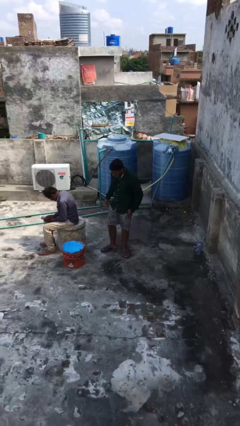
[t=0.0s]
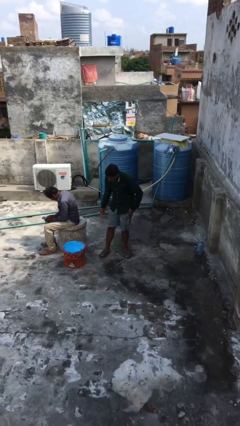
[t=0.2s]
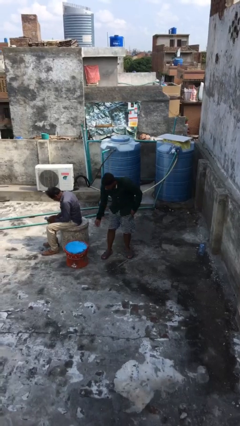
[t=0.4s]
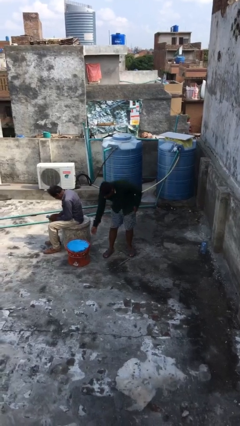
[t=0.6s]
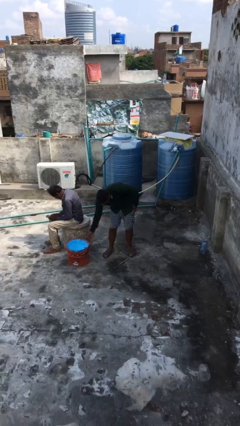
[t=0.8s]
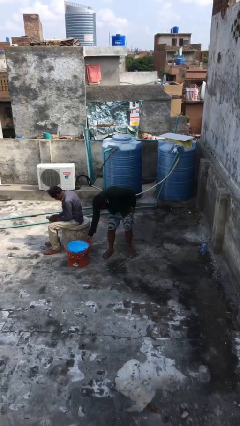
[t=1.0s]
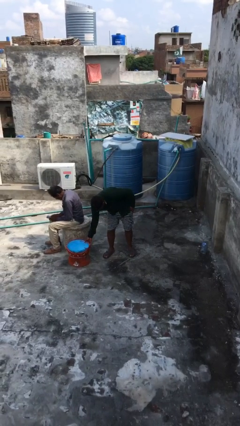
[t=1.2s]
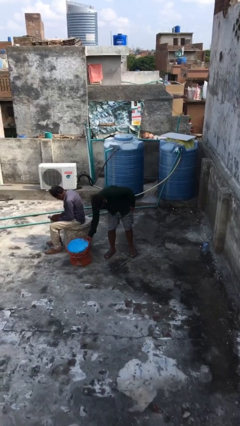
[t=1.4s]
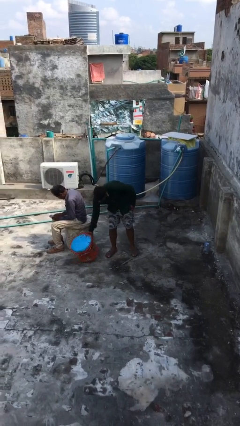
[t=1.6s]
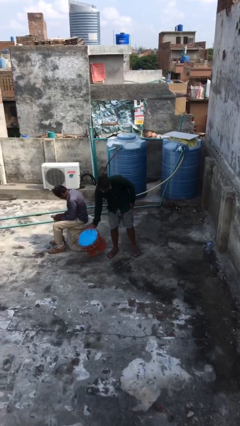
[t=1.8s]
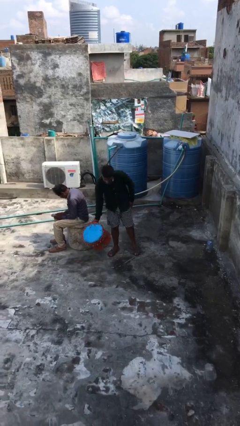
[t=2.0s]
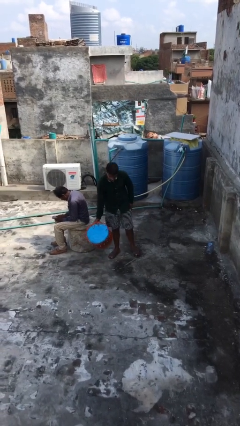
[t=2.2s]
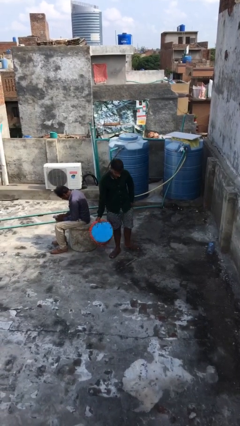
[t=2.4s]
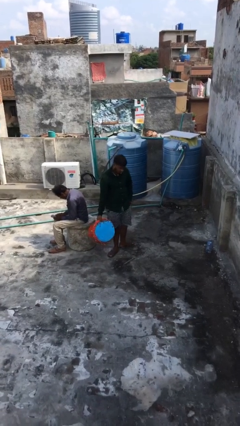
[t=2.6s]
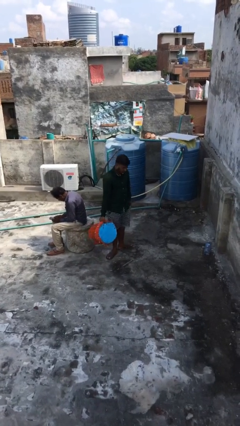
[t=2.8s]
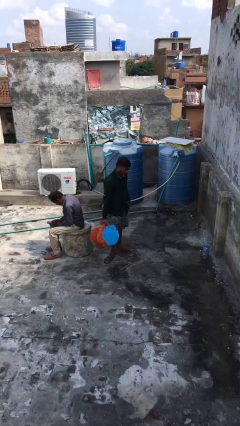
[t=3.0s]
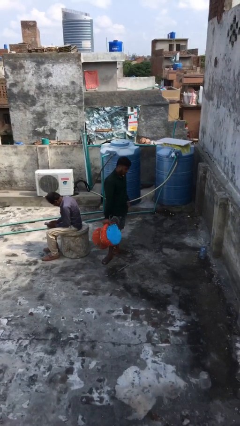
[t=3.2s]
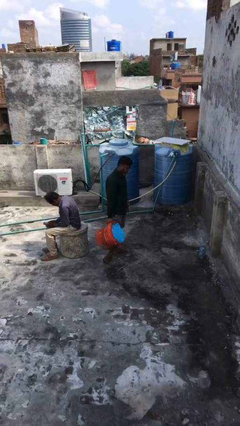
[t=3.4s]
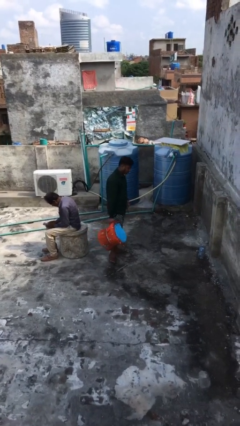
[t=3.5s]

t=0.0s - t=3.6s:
person steals object from person

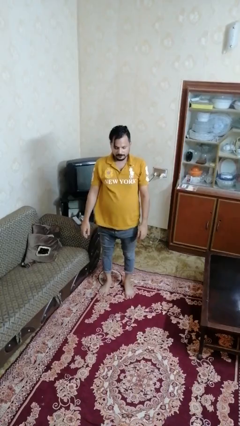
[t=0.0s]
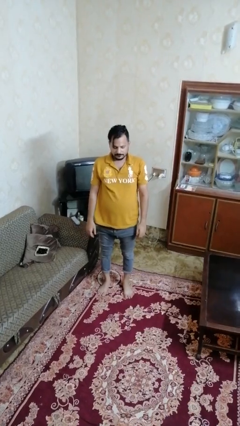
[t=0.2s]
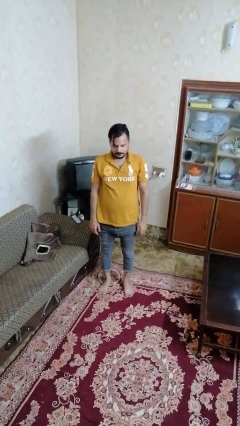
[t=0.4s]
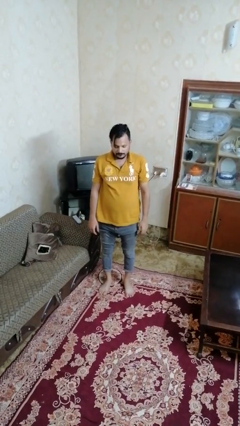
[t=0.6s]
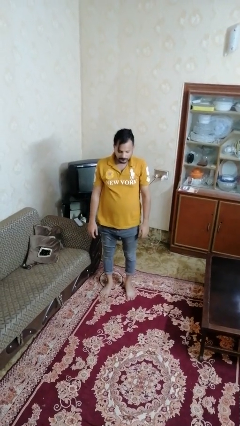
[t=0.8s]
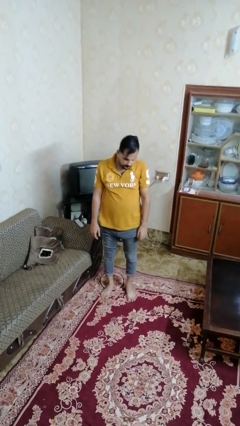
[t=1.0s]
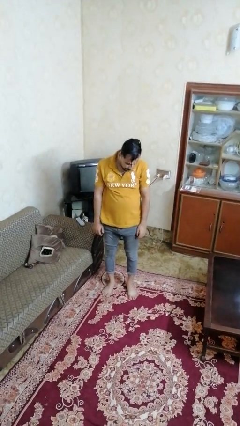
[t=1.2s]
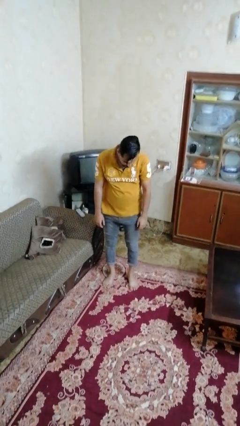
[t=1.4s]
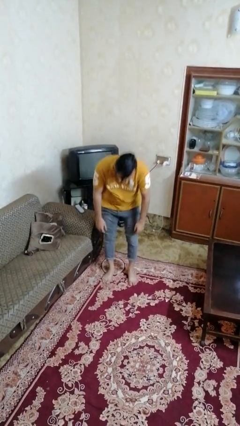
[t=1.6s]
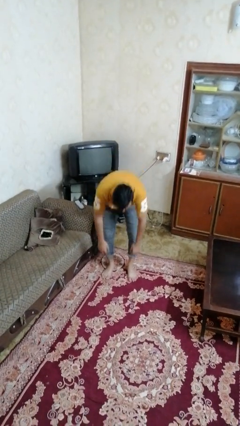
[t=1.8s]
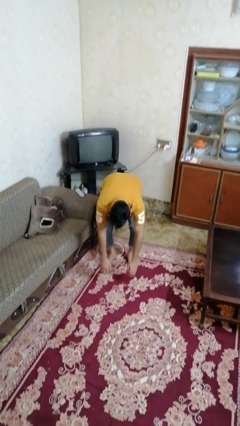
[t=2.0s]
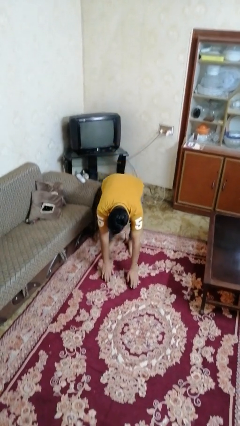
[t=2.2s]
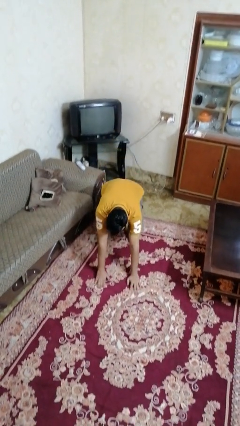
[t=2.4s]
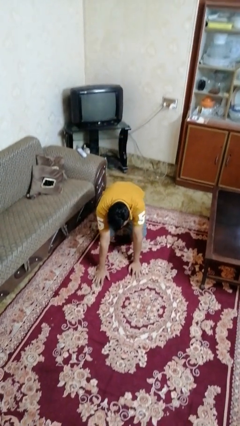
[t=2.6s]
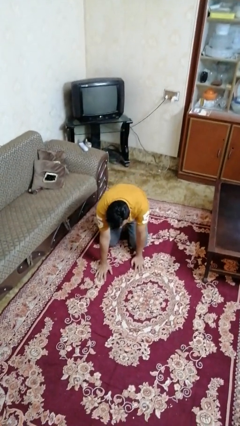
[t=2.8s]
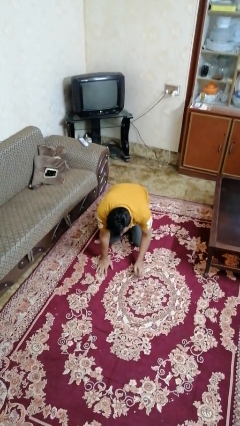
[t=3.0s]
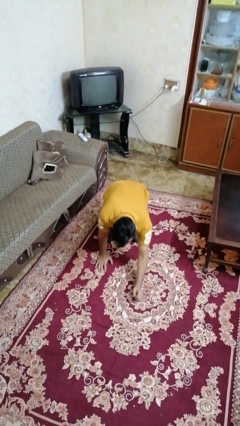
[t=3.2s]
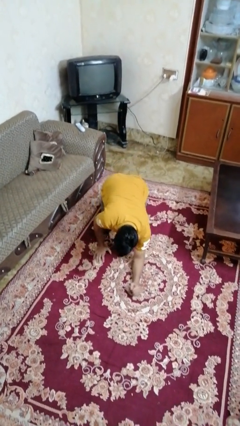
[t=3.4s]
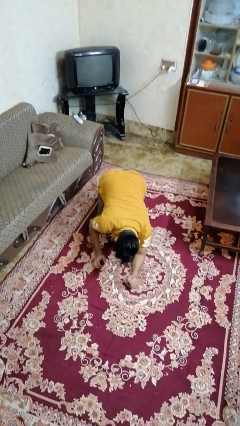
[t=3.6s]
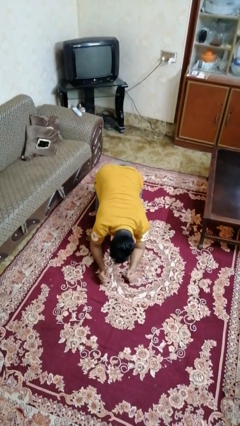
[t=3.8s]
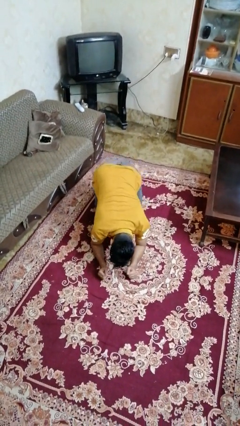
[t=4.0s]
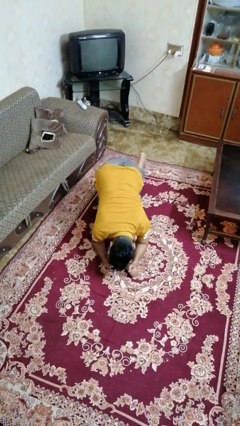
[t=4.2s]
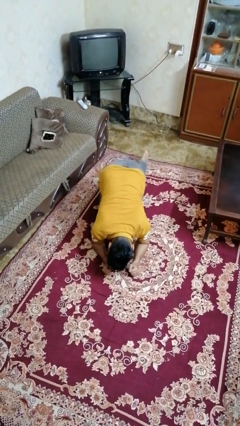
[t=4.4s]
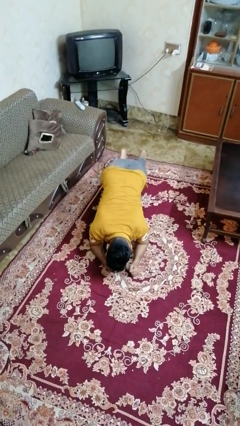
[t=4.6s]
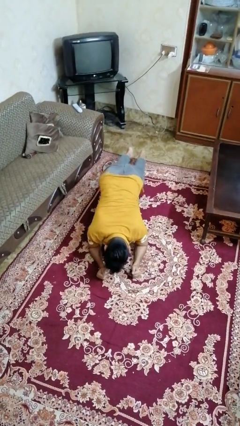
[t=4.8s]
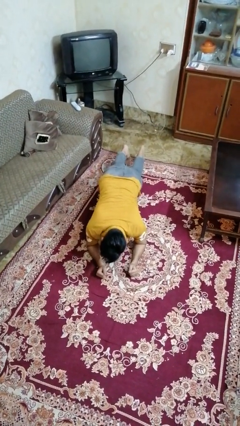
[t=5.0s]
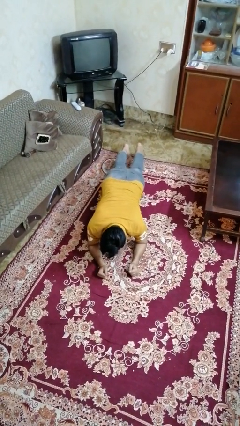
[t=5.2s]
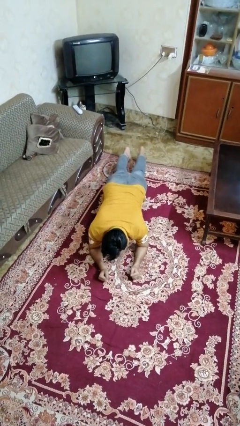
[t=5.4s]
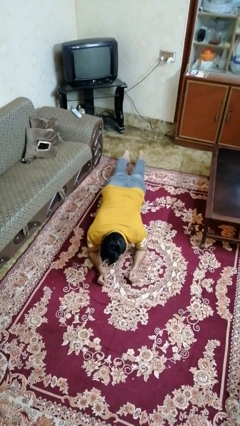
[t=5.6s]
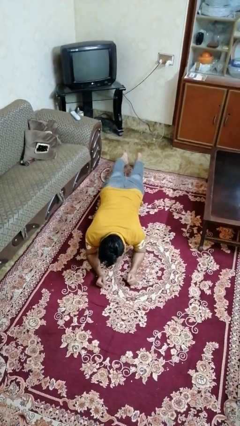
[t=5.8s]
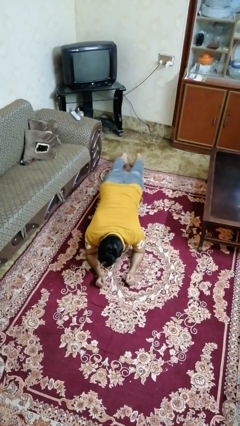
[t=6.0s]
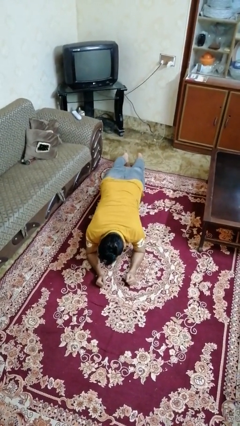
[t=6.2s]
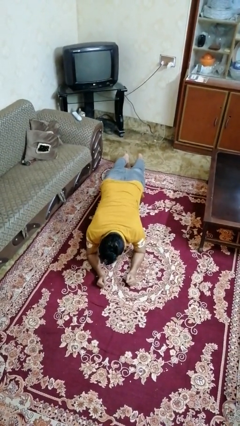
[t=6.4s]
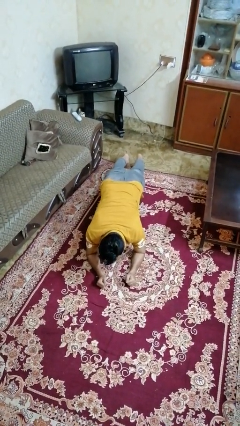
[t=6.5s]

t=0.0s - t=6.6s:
person exercises with plank

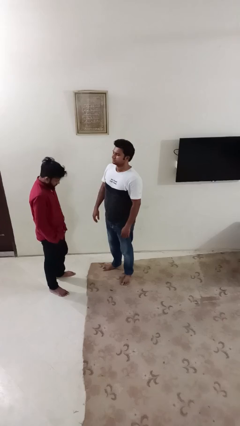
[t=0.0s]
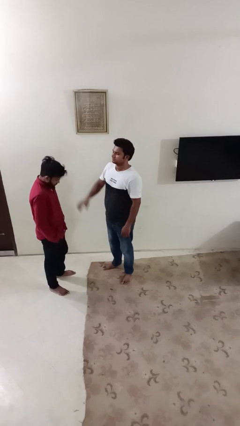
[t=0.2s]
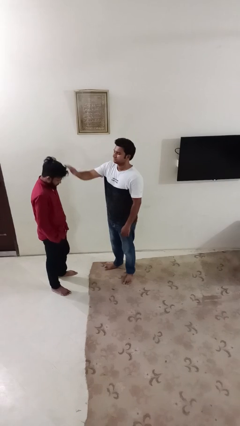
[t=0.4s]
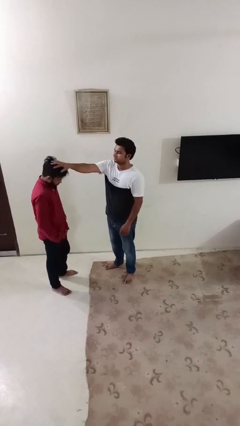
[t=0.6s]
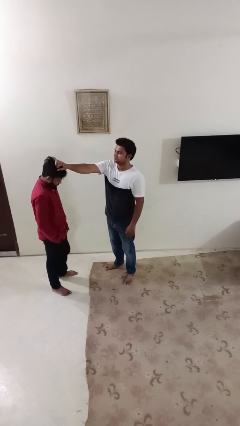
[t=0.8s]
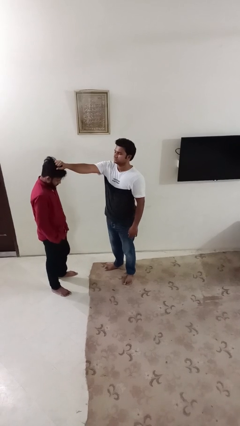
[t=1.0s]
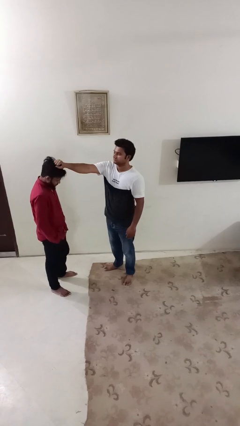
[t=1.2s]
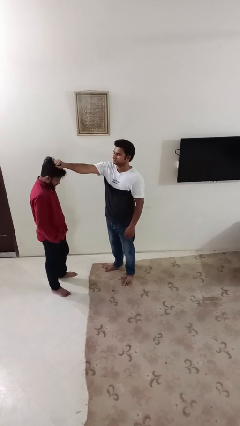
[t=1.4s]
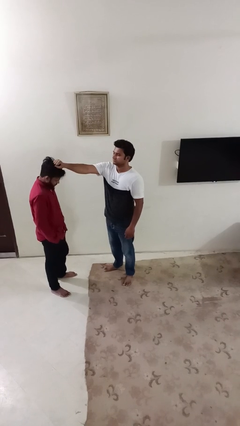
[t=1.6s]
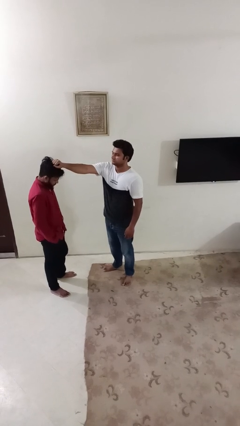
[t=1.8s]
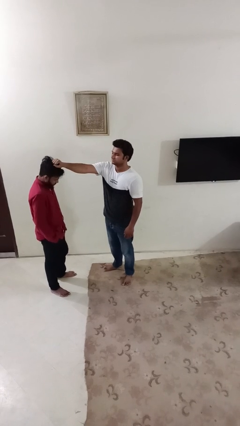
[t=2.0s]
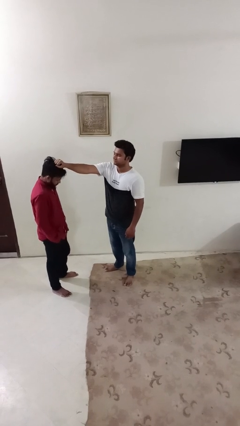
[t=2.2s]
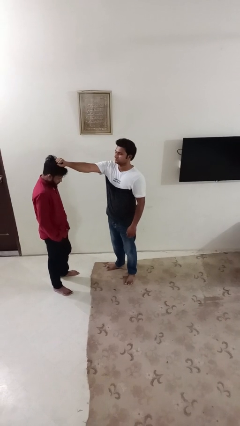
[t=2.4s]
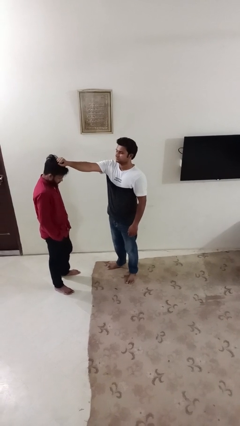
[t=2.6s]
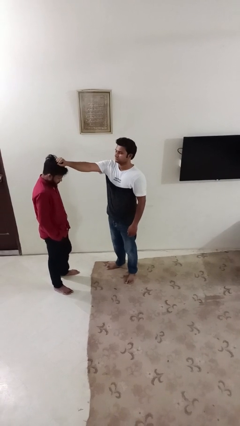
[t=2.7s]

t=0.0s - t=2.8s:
person grabs person by hair

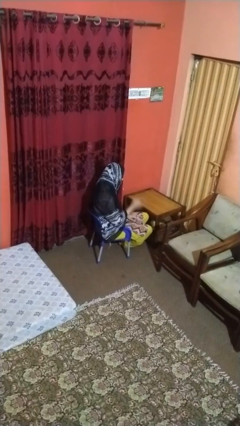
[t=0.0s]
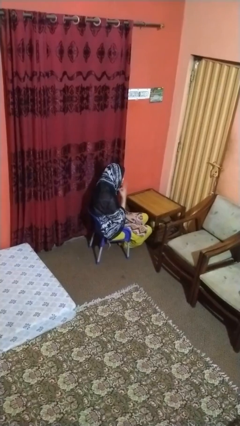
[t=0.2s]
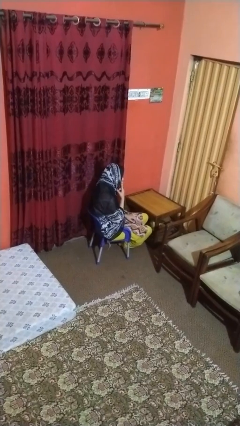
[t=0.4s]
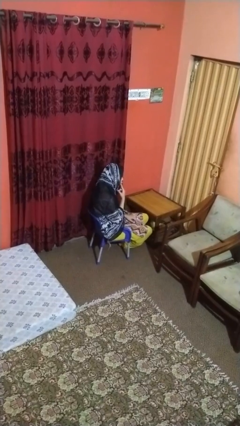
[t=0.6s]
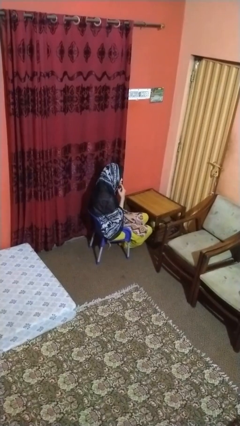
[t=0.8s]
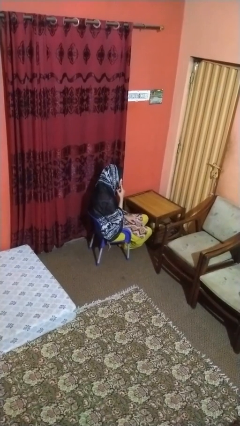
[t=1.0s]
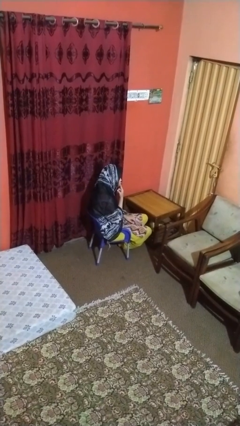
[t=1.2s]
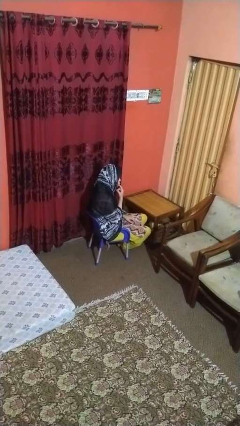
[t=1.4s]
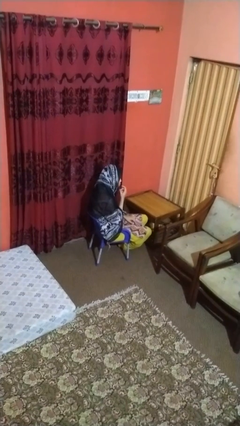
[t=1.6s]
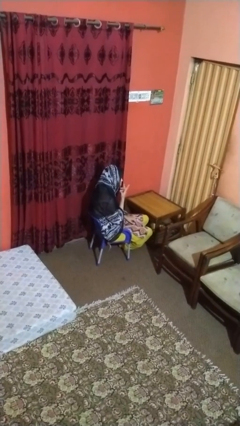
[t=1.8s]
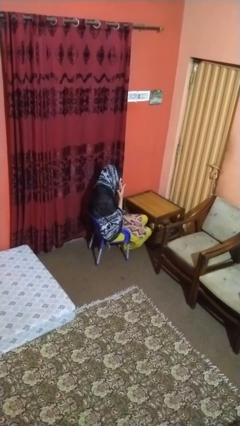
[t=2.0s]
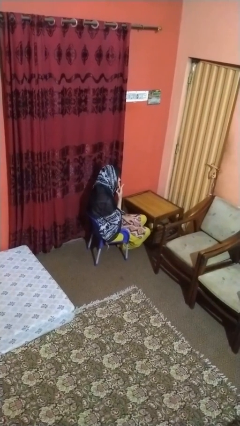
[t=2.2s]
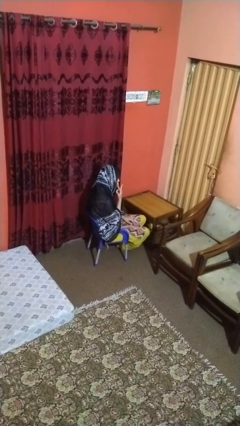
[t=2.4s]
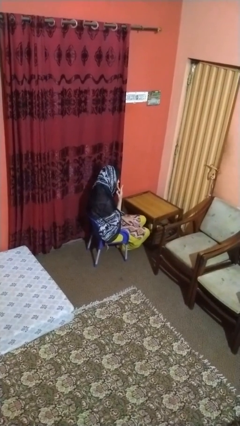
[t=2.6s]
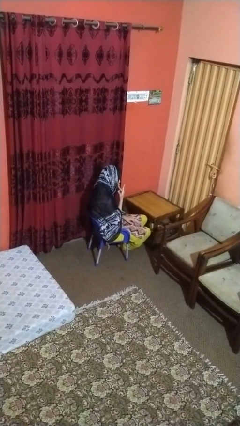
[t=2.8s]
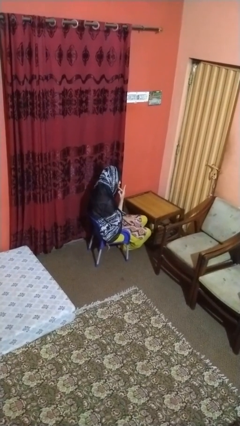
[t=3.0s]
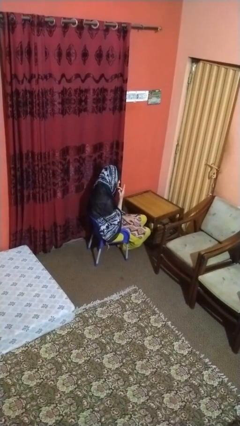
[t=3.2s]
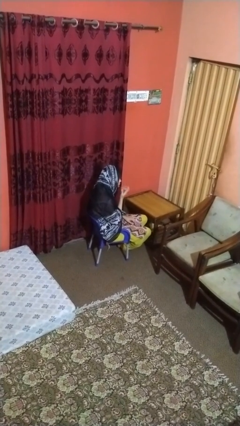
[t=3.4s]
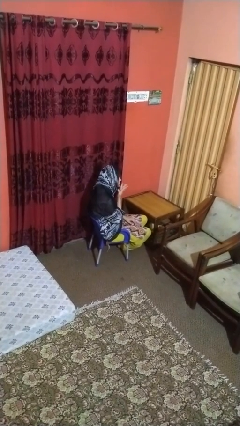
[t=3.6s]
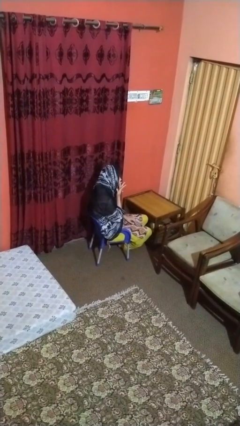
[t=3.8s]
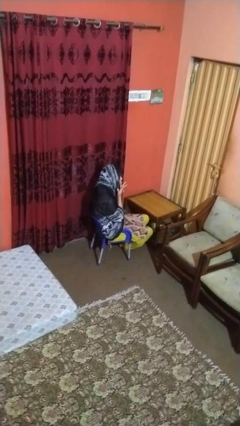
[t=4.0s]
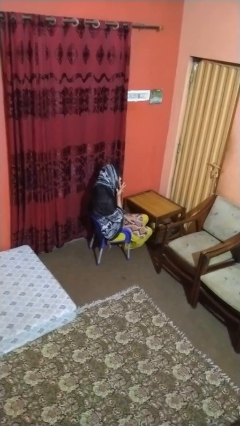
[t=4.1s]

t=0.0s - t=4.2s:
person licks fingers

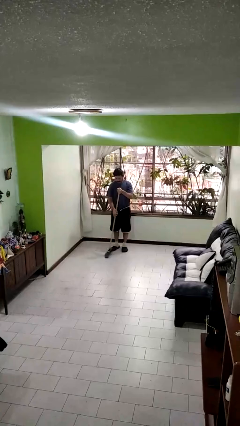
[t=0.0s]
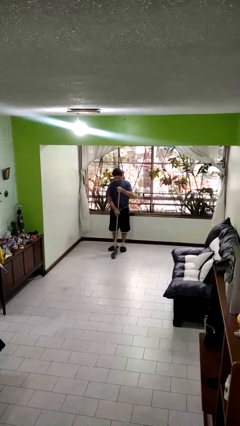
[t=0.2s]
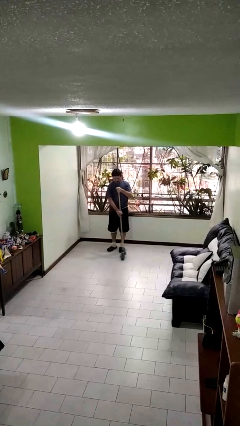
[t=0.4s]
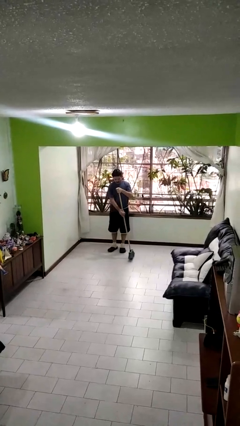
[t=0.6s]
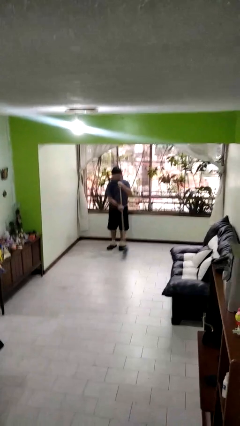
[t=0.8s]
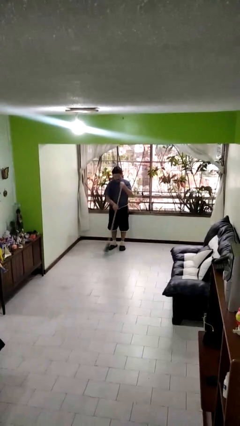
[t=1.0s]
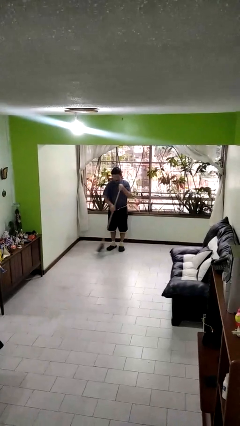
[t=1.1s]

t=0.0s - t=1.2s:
person sweeps floor
